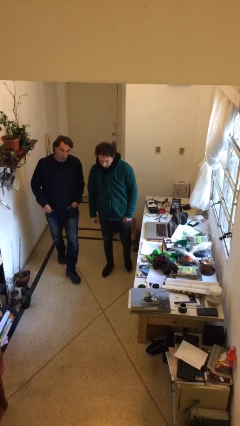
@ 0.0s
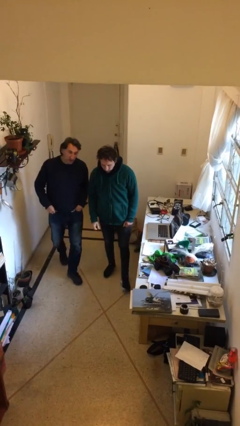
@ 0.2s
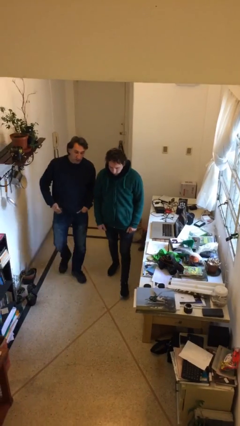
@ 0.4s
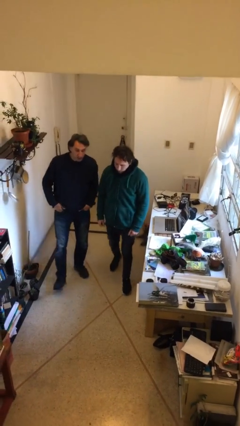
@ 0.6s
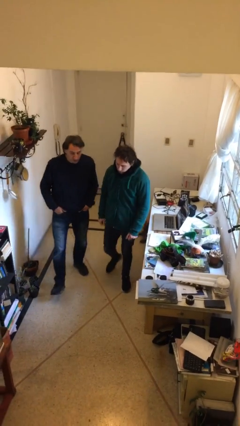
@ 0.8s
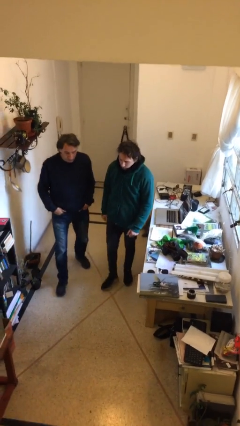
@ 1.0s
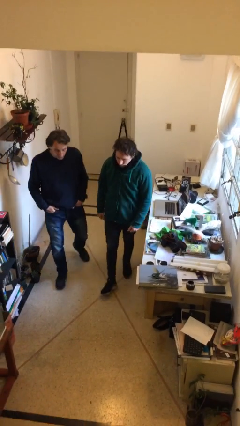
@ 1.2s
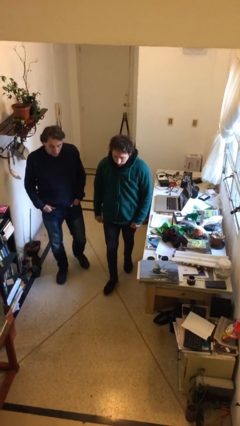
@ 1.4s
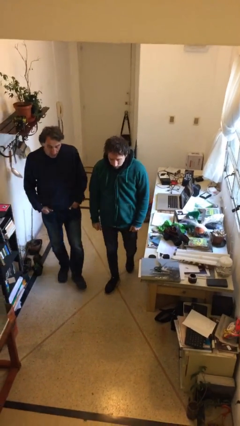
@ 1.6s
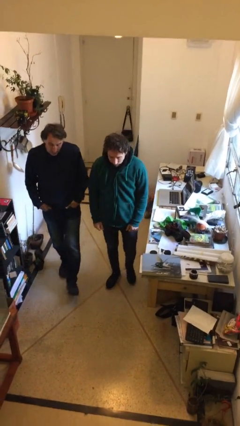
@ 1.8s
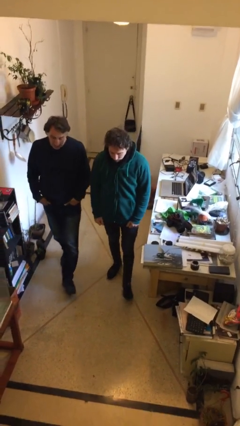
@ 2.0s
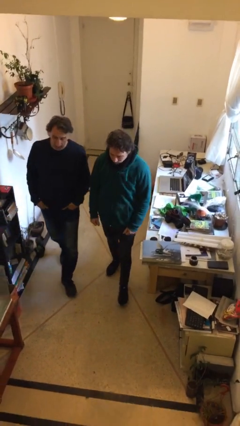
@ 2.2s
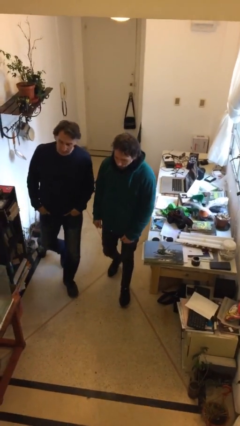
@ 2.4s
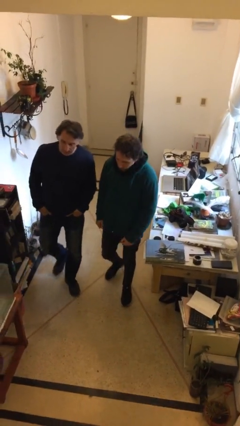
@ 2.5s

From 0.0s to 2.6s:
person talks to person

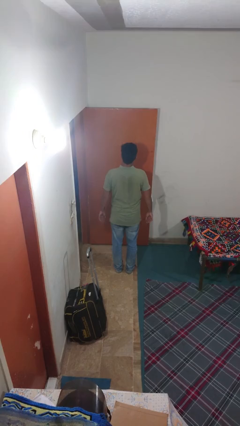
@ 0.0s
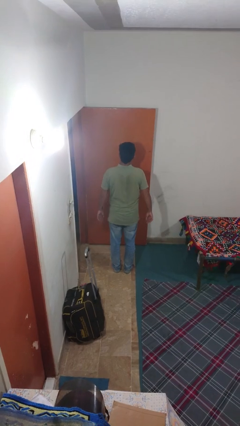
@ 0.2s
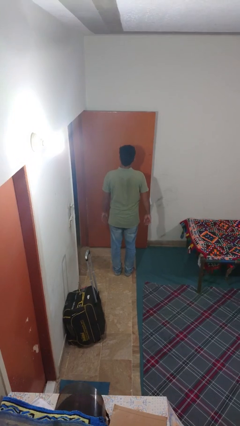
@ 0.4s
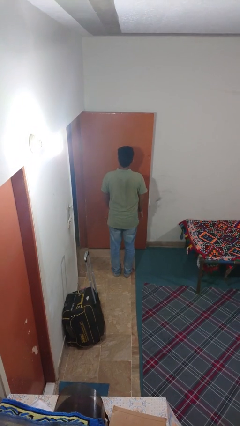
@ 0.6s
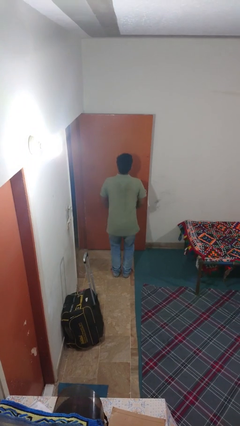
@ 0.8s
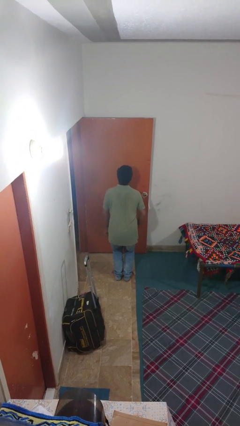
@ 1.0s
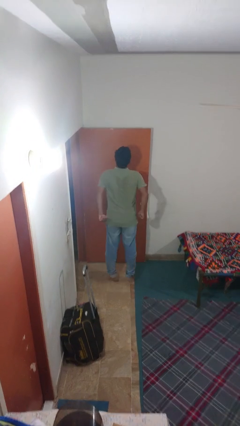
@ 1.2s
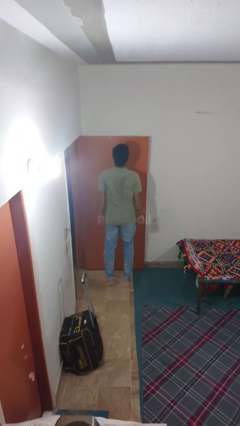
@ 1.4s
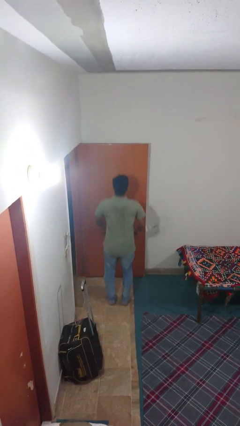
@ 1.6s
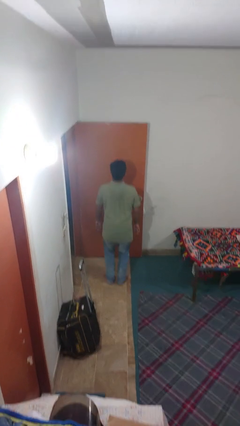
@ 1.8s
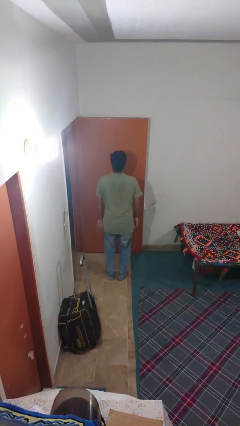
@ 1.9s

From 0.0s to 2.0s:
person jumps

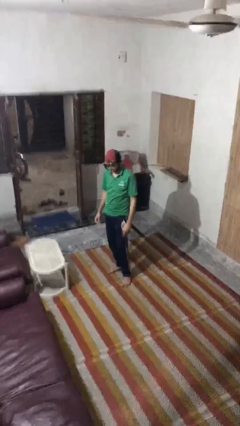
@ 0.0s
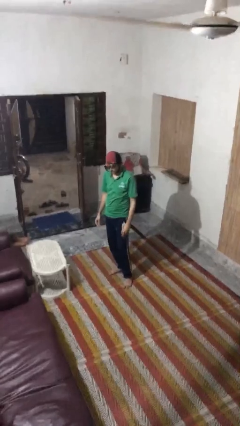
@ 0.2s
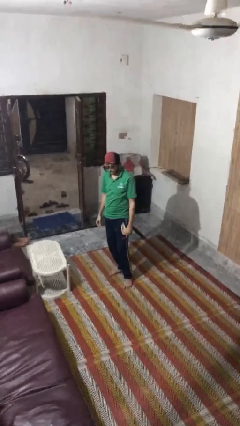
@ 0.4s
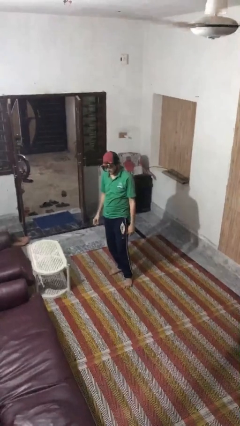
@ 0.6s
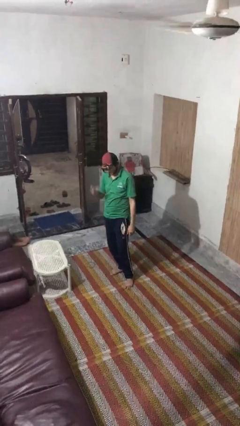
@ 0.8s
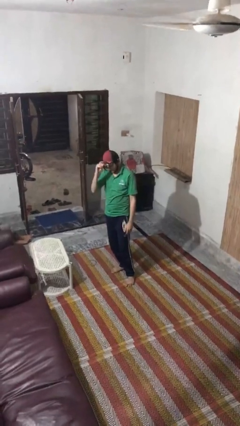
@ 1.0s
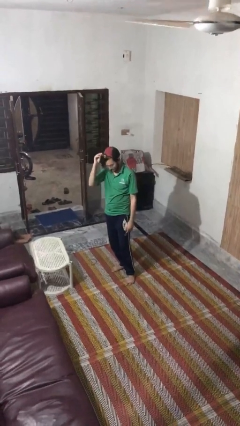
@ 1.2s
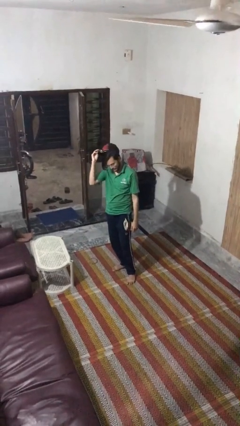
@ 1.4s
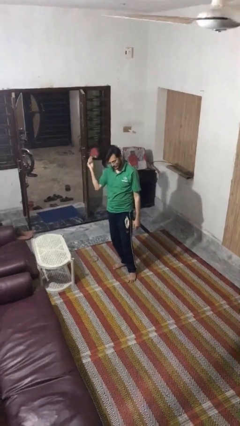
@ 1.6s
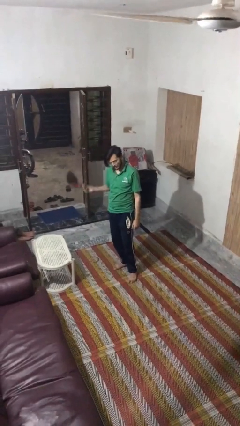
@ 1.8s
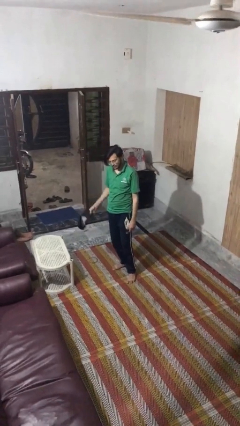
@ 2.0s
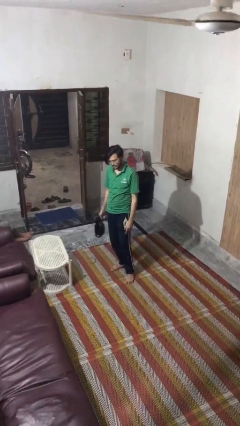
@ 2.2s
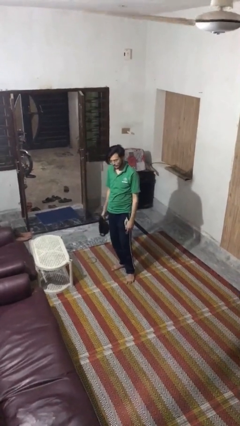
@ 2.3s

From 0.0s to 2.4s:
person takes off hat

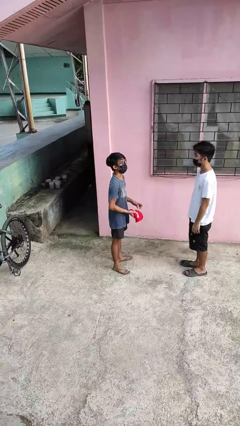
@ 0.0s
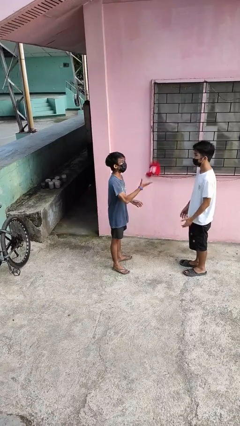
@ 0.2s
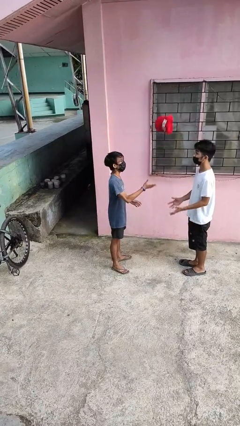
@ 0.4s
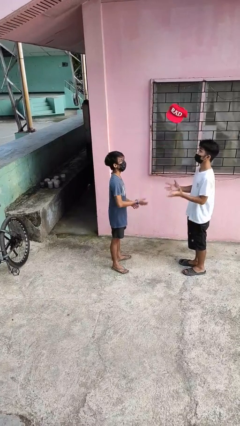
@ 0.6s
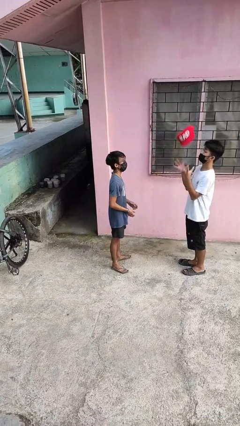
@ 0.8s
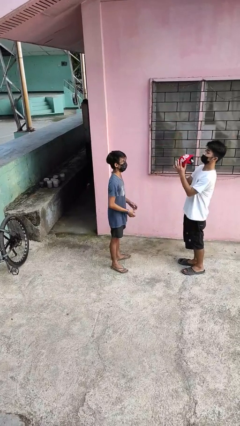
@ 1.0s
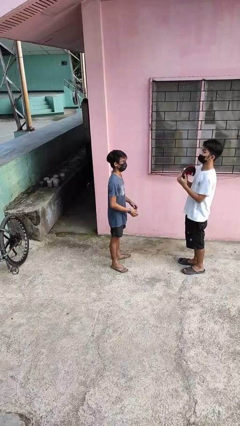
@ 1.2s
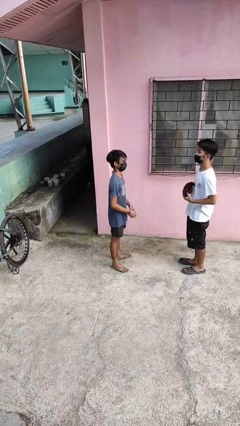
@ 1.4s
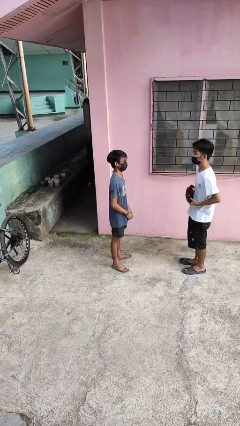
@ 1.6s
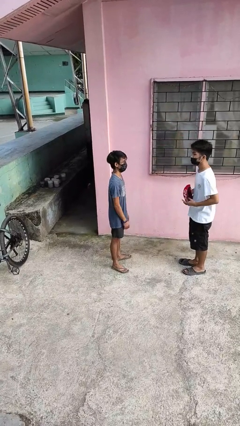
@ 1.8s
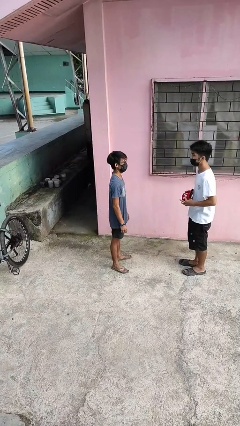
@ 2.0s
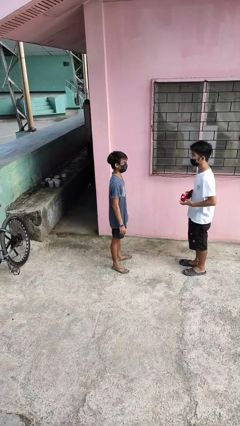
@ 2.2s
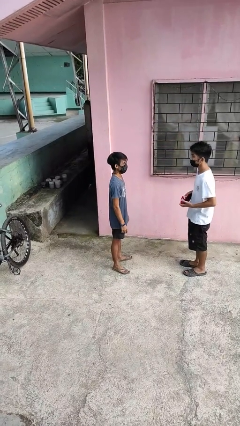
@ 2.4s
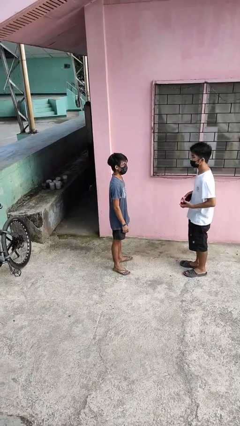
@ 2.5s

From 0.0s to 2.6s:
person throws object to person

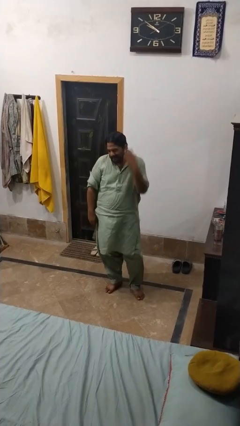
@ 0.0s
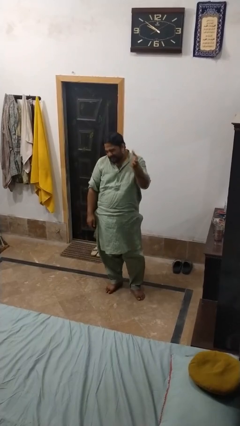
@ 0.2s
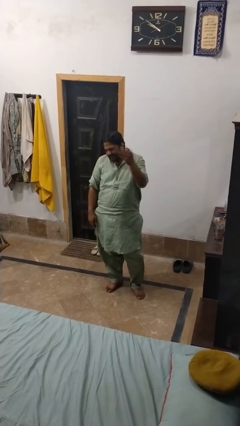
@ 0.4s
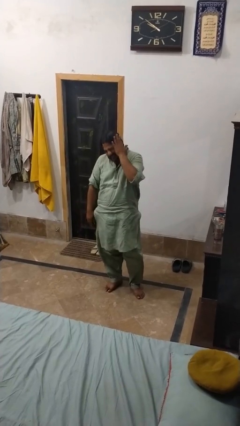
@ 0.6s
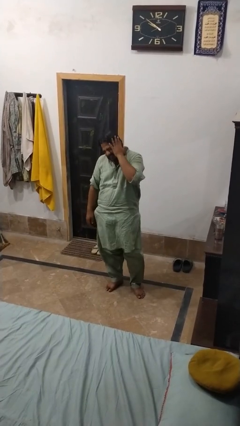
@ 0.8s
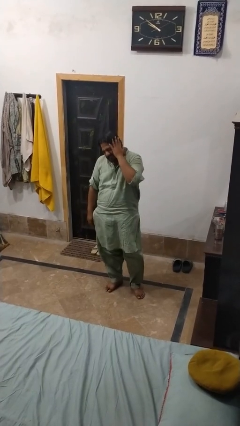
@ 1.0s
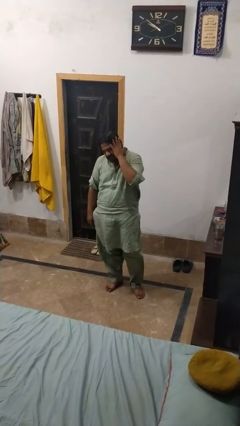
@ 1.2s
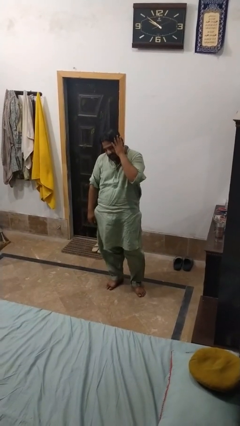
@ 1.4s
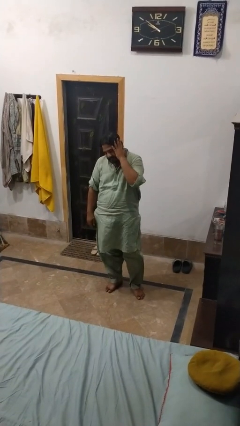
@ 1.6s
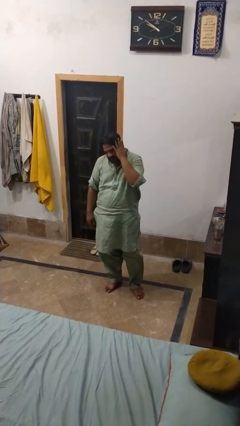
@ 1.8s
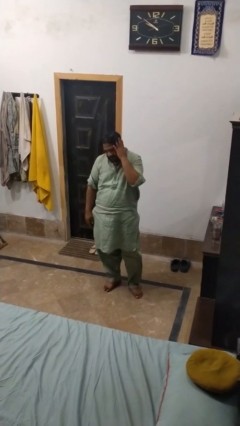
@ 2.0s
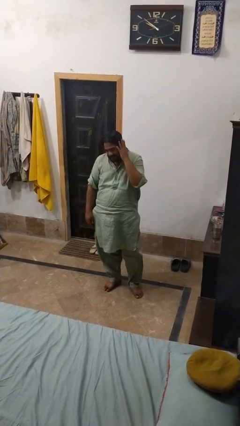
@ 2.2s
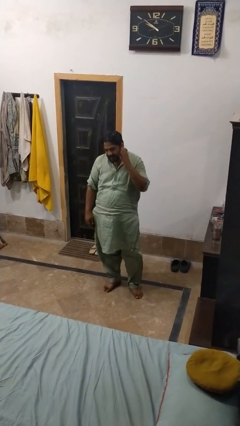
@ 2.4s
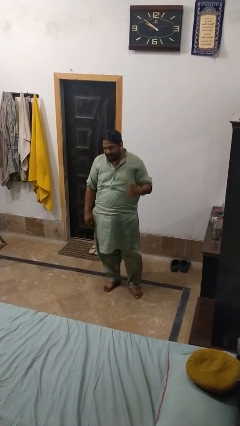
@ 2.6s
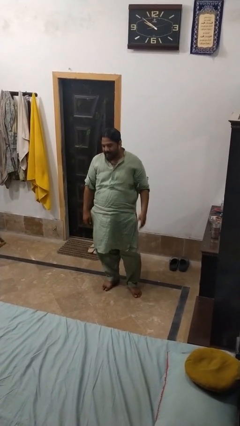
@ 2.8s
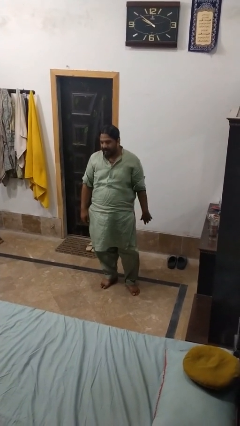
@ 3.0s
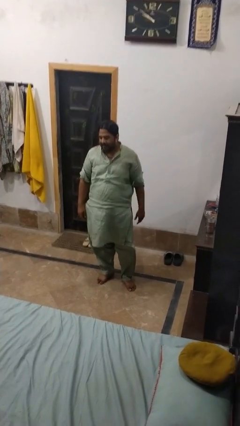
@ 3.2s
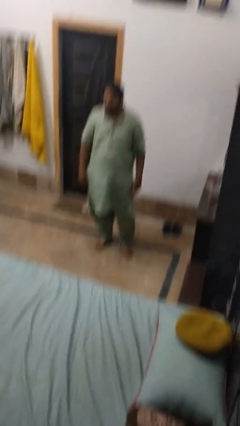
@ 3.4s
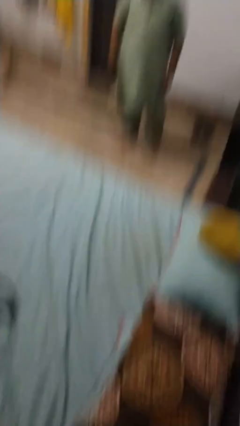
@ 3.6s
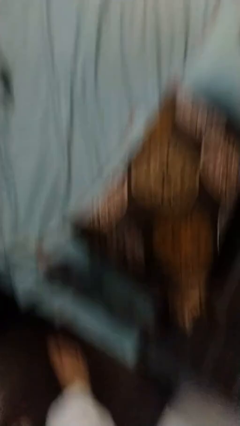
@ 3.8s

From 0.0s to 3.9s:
person swats bug

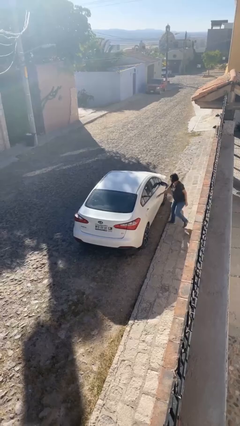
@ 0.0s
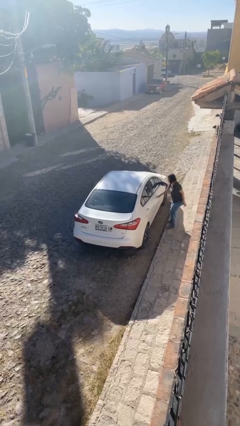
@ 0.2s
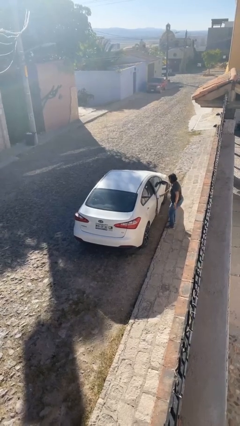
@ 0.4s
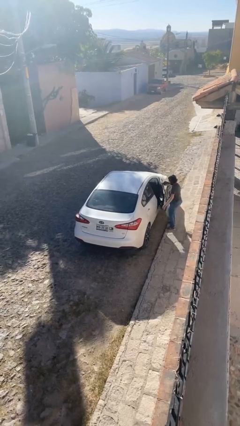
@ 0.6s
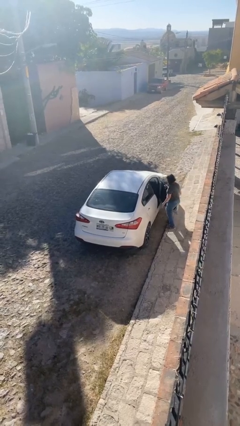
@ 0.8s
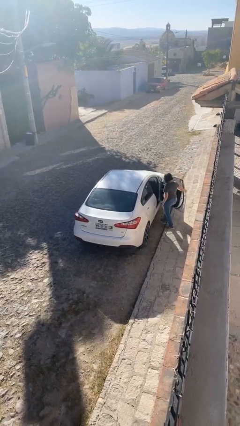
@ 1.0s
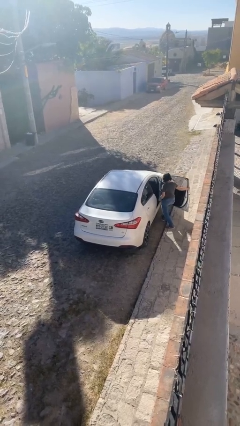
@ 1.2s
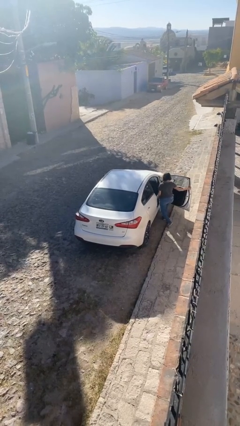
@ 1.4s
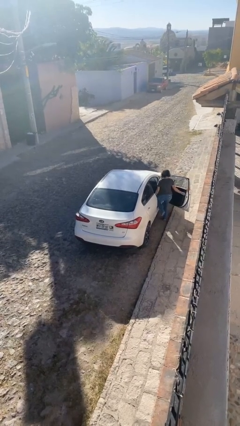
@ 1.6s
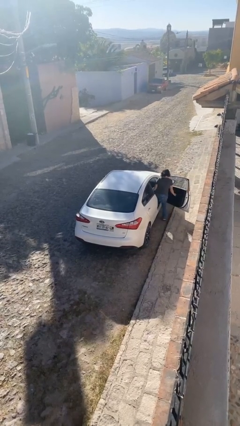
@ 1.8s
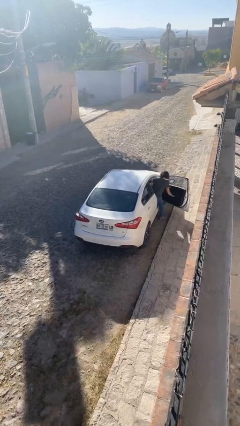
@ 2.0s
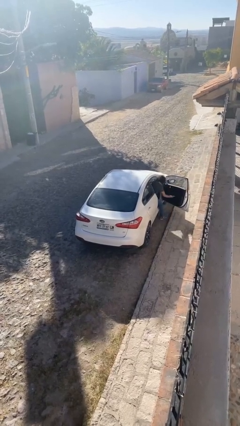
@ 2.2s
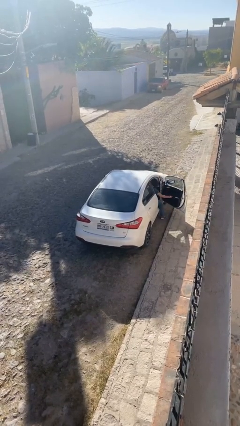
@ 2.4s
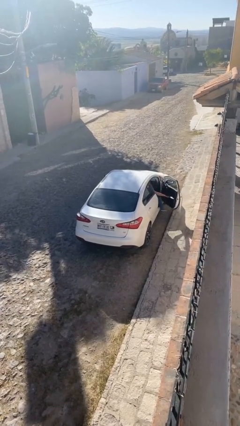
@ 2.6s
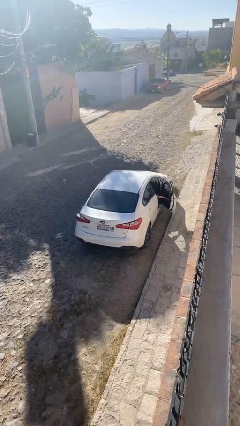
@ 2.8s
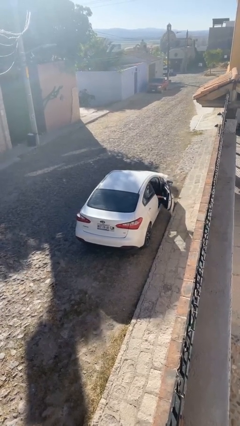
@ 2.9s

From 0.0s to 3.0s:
car picks up person

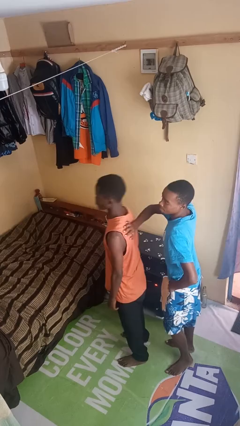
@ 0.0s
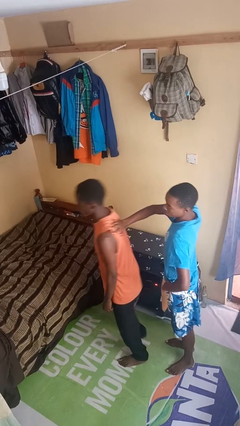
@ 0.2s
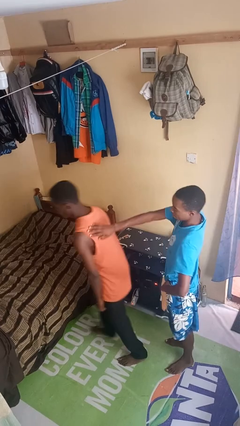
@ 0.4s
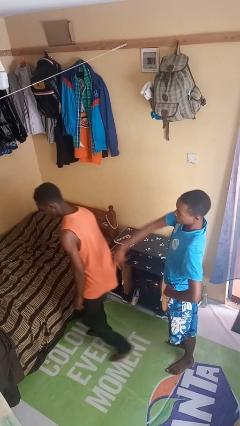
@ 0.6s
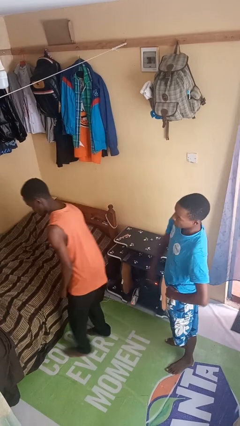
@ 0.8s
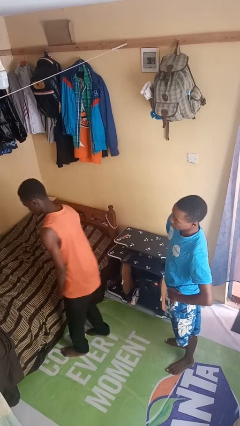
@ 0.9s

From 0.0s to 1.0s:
person shoves person
